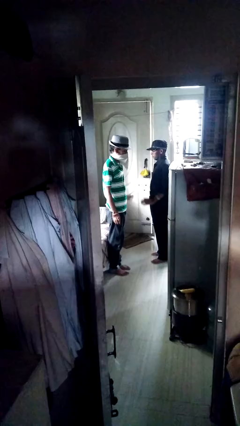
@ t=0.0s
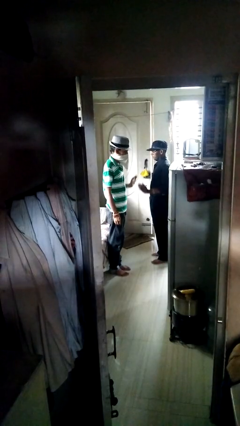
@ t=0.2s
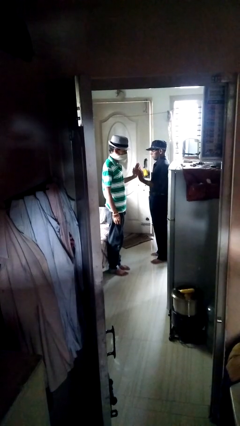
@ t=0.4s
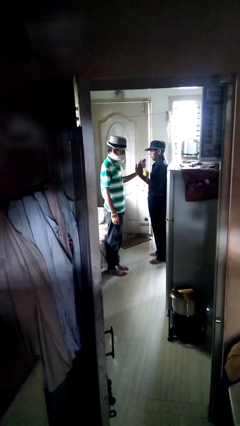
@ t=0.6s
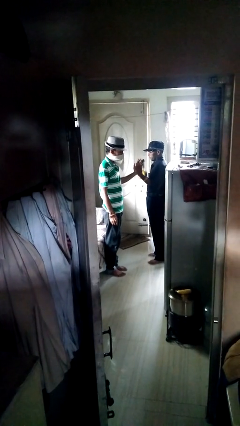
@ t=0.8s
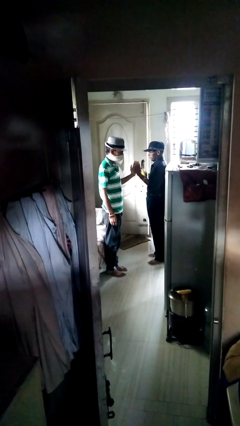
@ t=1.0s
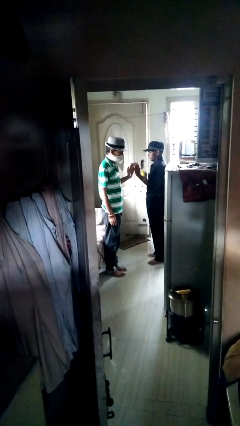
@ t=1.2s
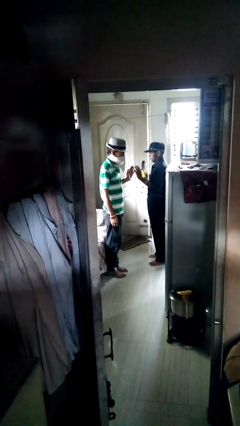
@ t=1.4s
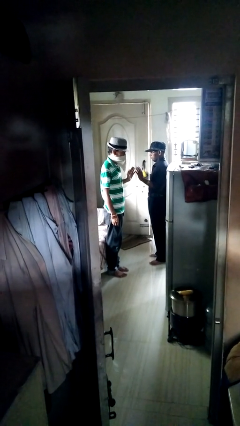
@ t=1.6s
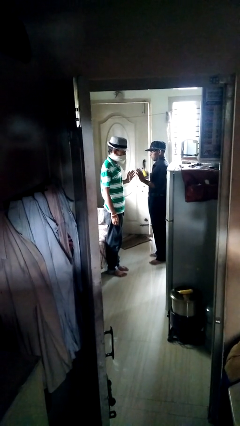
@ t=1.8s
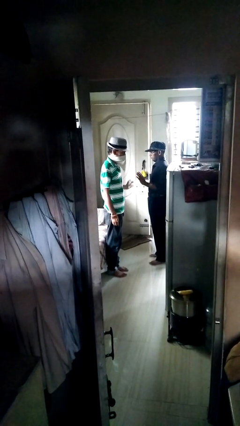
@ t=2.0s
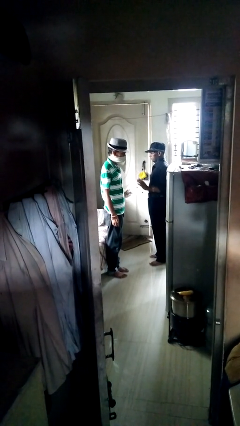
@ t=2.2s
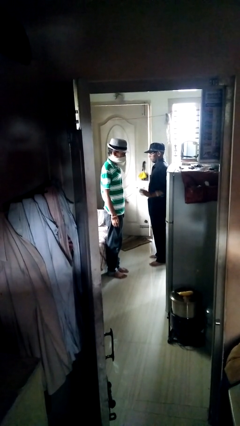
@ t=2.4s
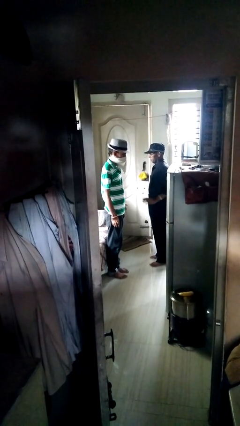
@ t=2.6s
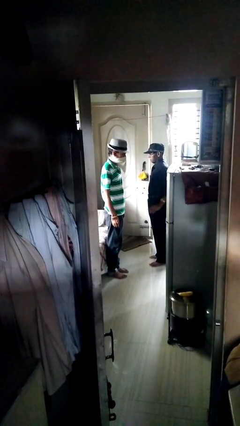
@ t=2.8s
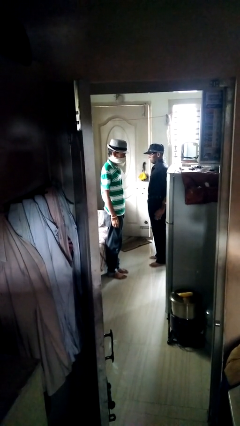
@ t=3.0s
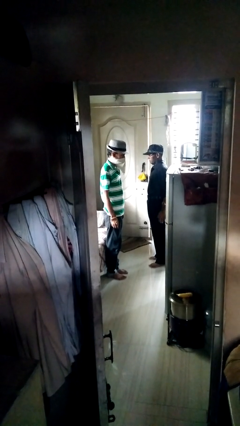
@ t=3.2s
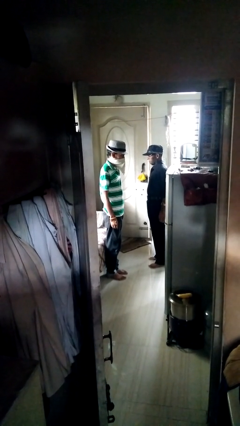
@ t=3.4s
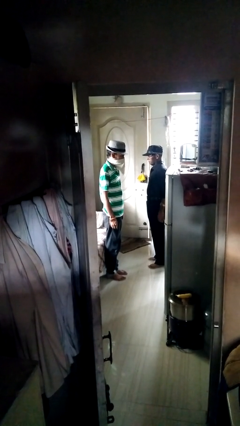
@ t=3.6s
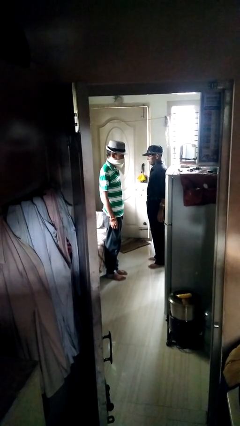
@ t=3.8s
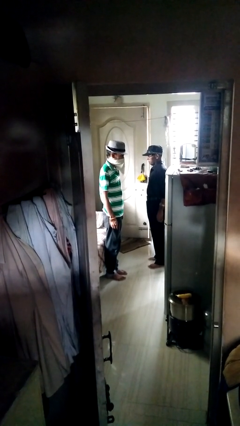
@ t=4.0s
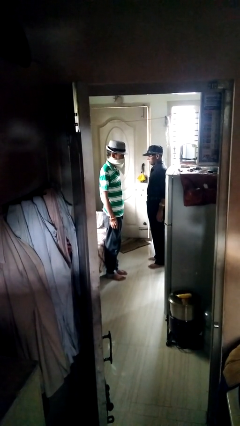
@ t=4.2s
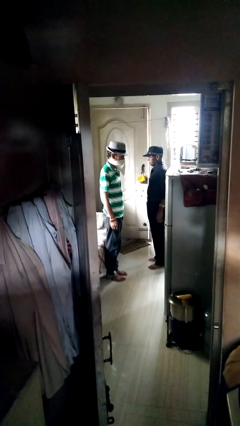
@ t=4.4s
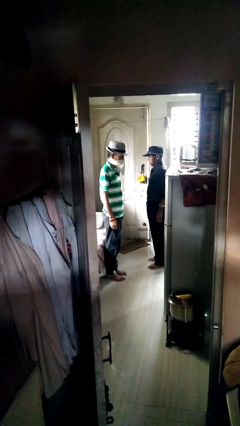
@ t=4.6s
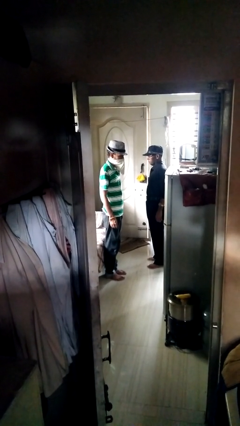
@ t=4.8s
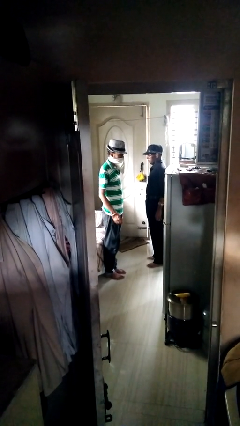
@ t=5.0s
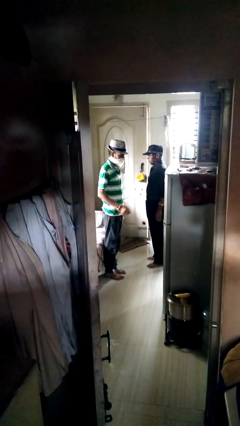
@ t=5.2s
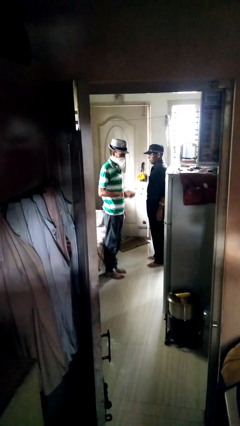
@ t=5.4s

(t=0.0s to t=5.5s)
person highfives hand

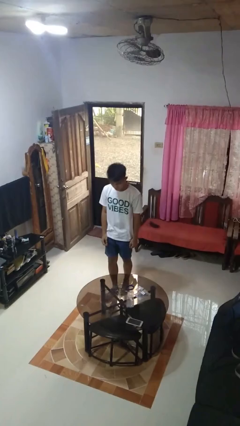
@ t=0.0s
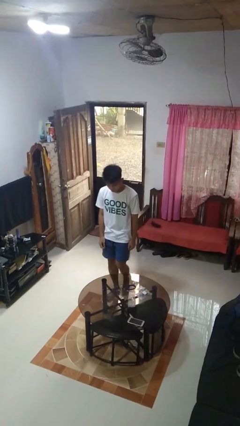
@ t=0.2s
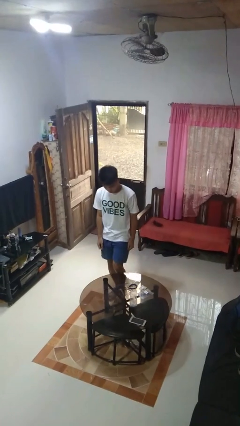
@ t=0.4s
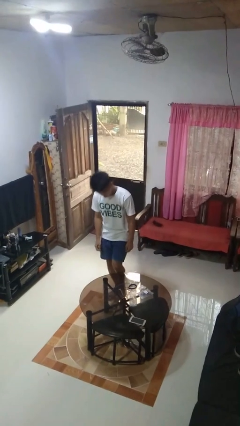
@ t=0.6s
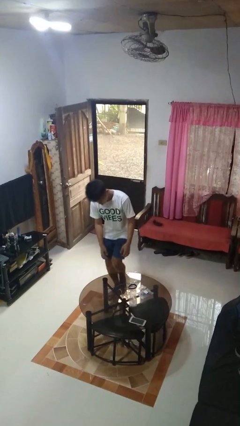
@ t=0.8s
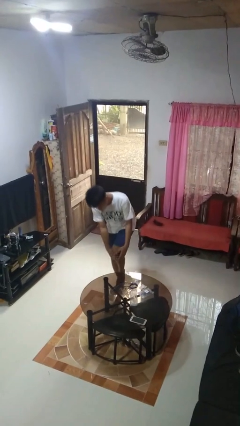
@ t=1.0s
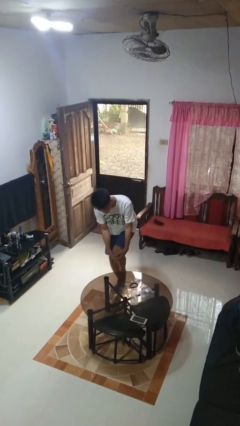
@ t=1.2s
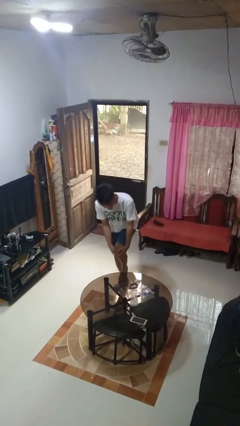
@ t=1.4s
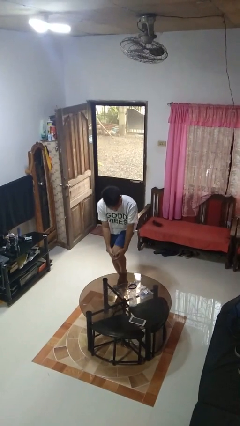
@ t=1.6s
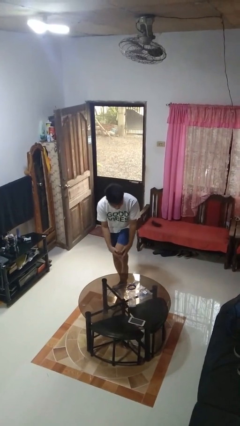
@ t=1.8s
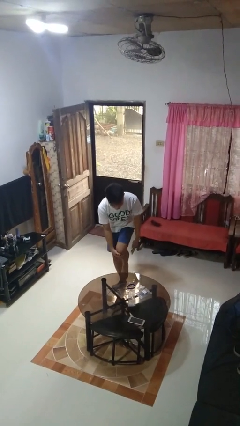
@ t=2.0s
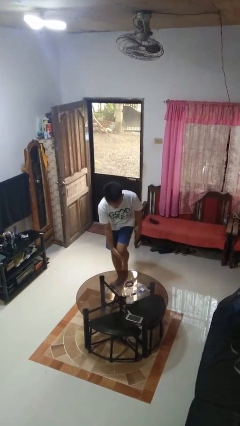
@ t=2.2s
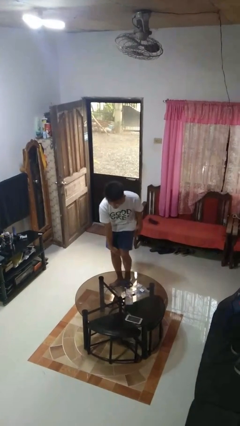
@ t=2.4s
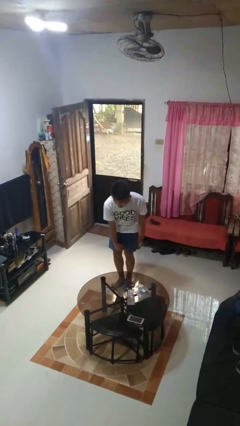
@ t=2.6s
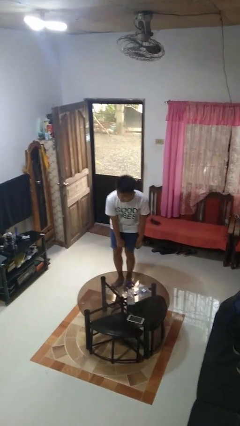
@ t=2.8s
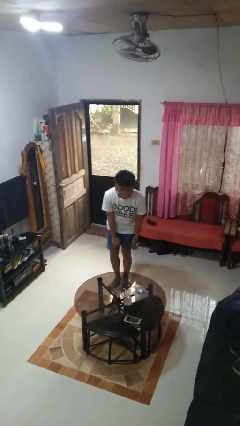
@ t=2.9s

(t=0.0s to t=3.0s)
person bumps into table

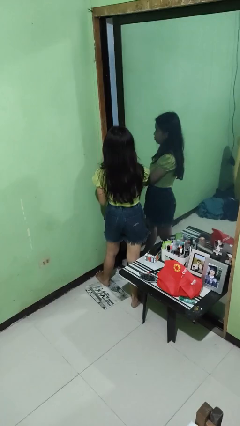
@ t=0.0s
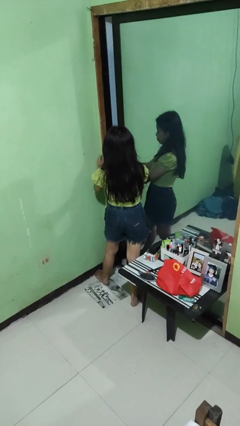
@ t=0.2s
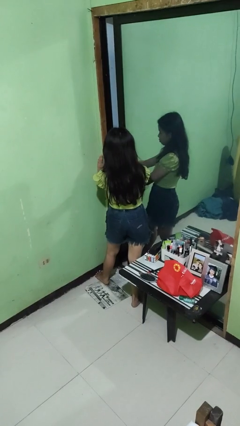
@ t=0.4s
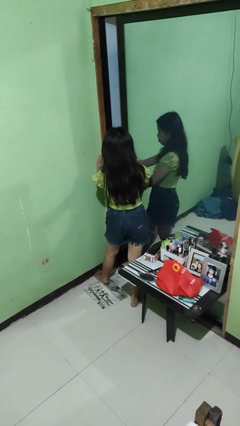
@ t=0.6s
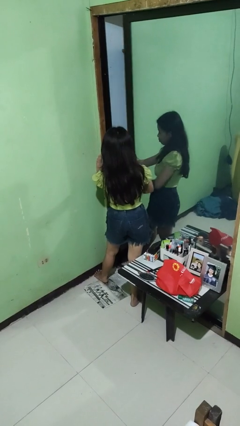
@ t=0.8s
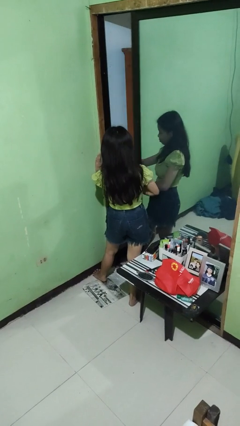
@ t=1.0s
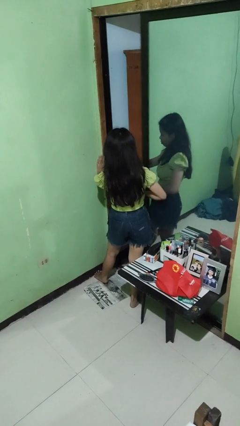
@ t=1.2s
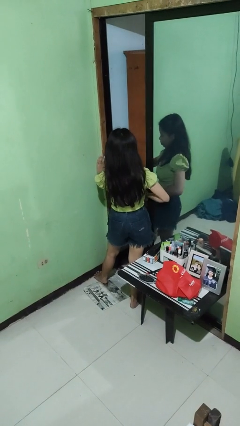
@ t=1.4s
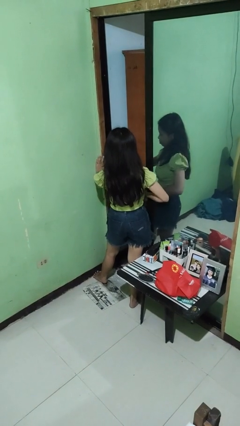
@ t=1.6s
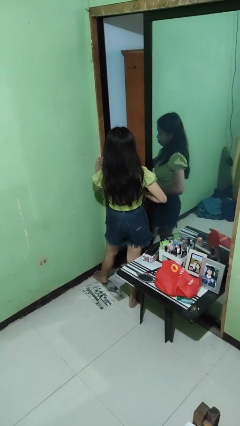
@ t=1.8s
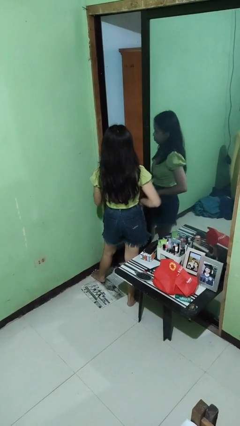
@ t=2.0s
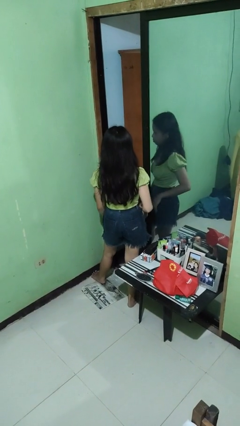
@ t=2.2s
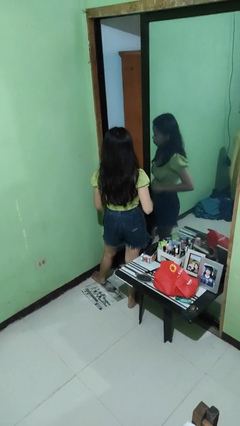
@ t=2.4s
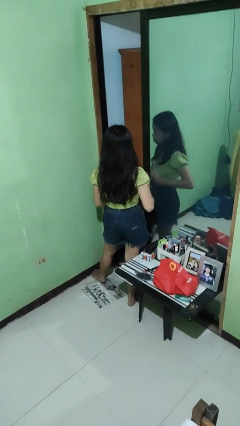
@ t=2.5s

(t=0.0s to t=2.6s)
person opens sliding door

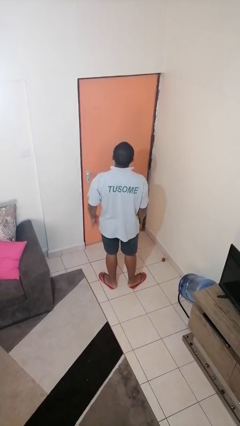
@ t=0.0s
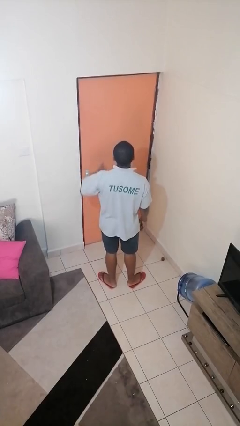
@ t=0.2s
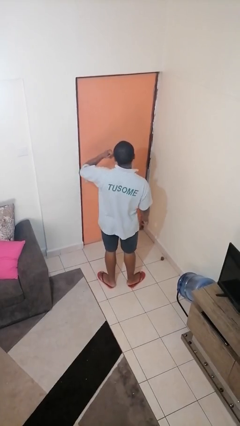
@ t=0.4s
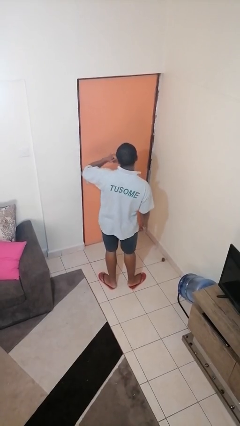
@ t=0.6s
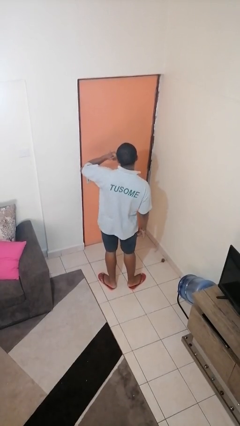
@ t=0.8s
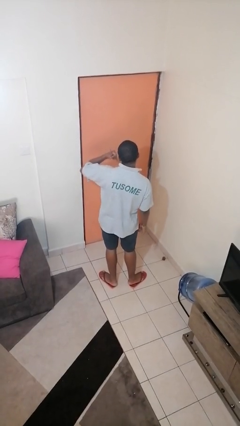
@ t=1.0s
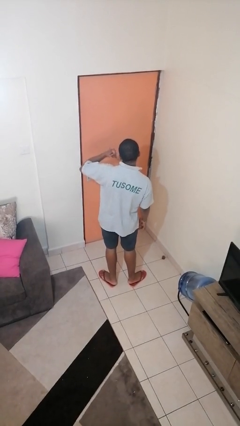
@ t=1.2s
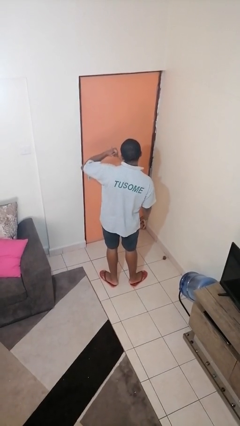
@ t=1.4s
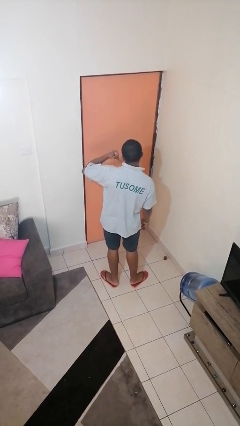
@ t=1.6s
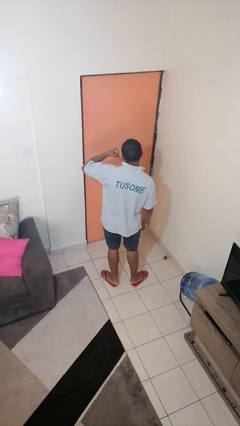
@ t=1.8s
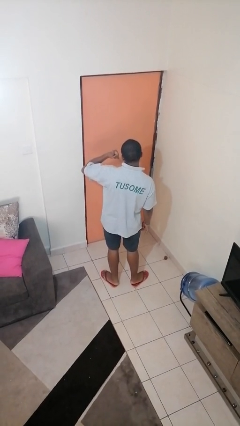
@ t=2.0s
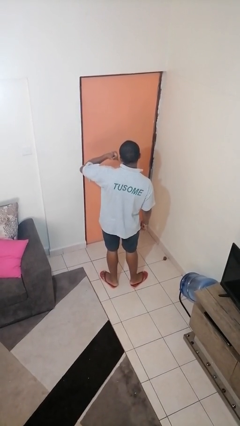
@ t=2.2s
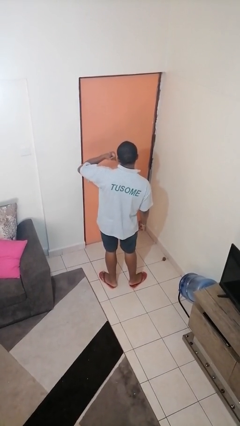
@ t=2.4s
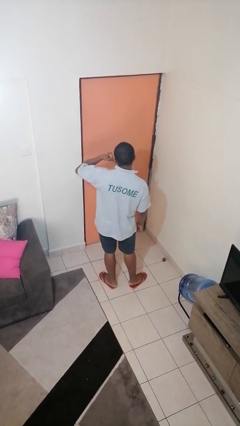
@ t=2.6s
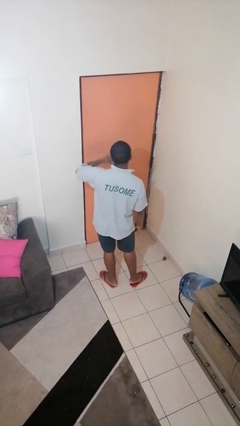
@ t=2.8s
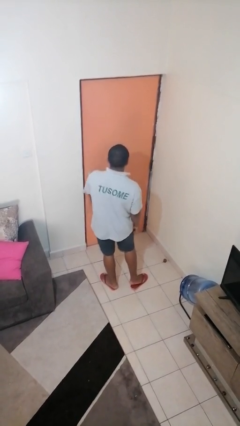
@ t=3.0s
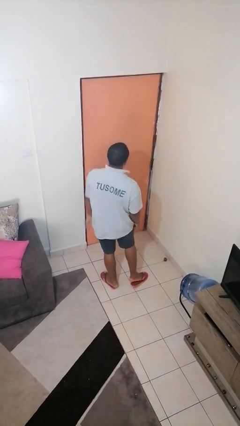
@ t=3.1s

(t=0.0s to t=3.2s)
person gestures call me

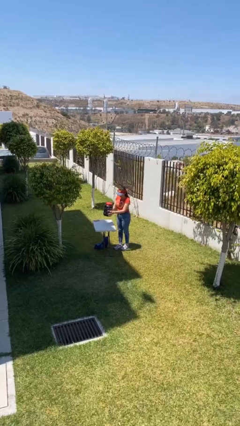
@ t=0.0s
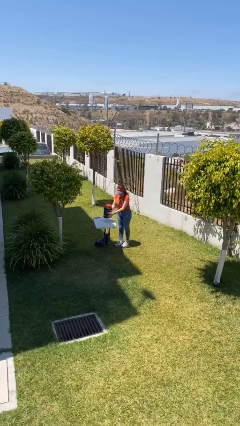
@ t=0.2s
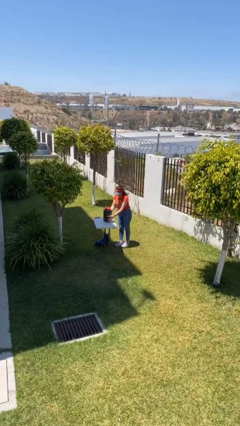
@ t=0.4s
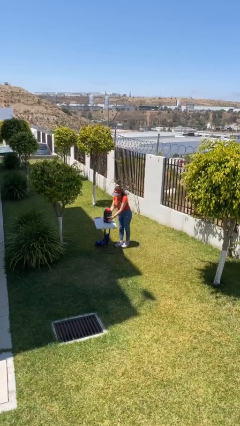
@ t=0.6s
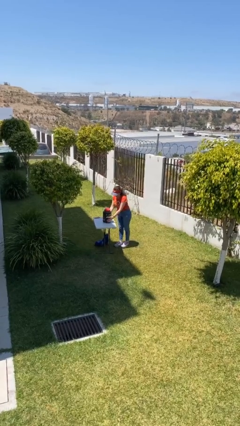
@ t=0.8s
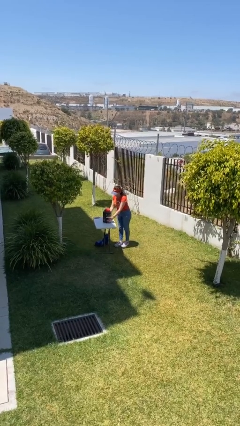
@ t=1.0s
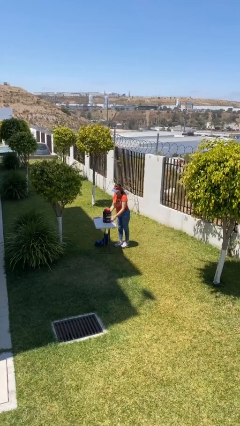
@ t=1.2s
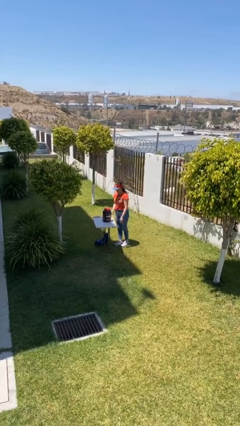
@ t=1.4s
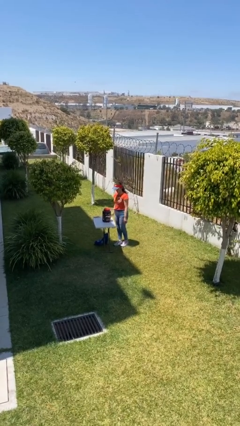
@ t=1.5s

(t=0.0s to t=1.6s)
person puts down object on table

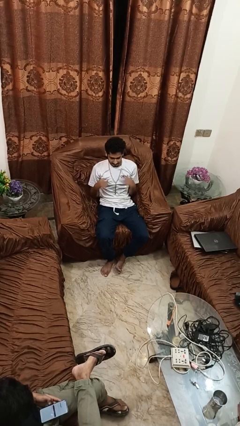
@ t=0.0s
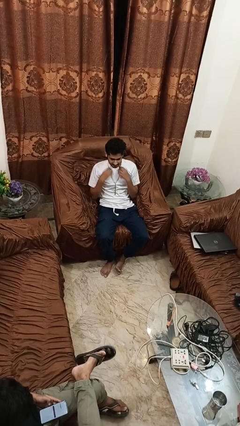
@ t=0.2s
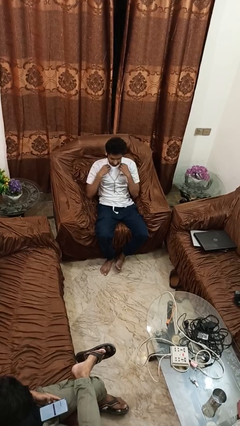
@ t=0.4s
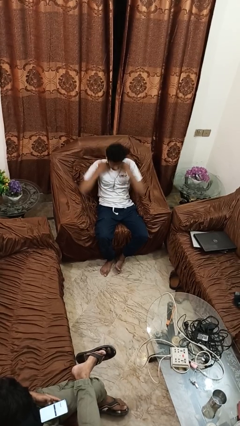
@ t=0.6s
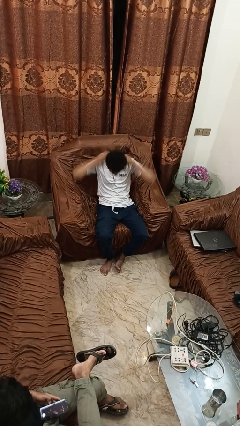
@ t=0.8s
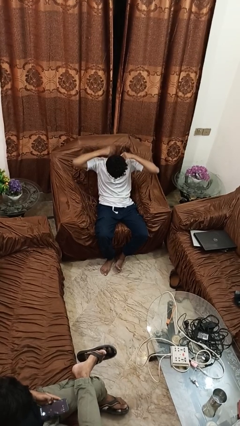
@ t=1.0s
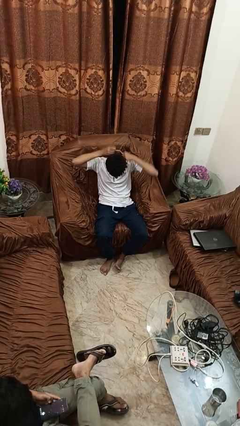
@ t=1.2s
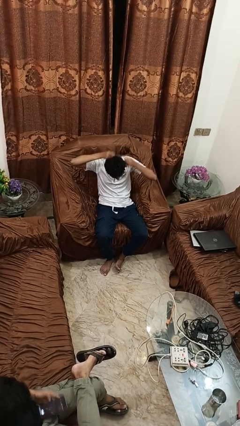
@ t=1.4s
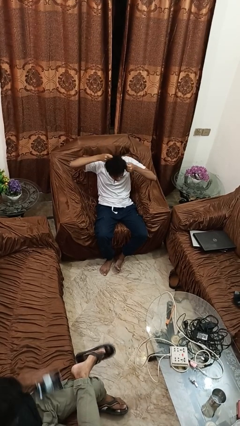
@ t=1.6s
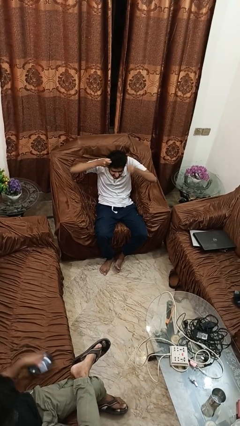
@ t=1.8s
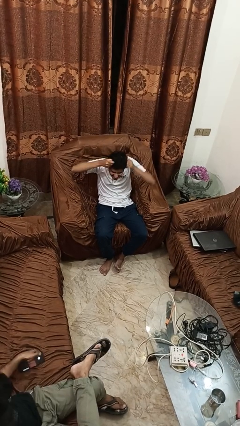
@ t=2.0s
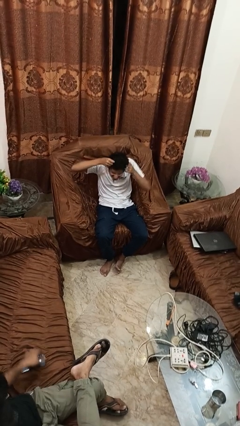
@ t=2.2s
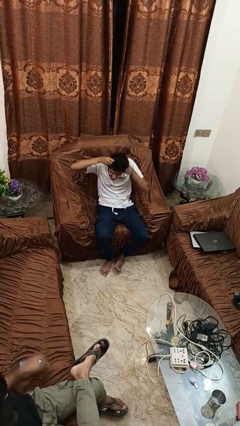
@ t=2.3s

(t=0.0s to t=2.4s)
person takes off necklace
